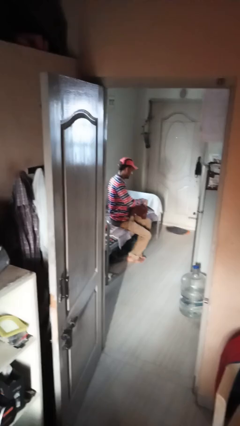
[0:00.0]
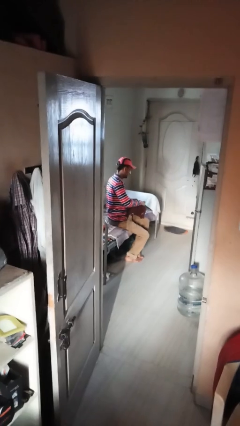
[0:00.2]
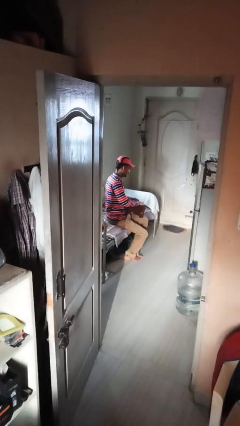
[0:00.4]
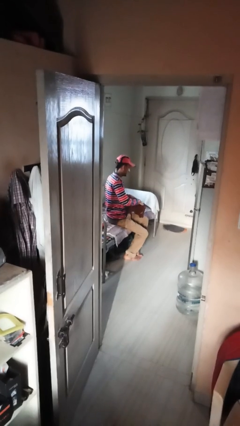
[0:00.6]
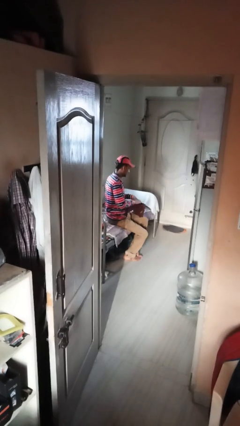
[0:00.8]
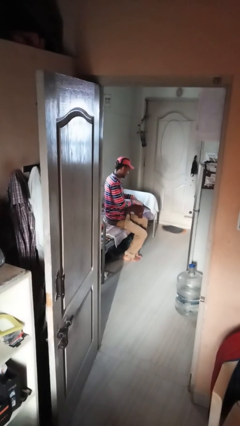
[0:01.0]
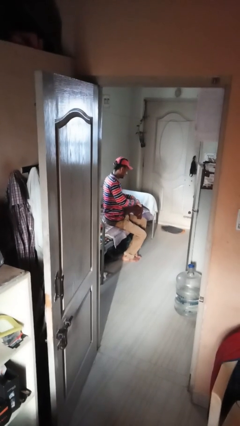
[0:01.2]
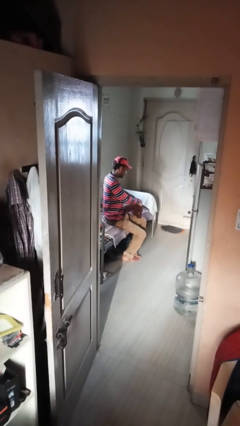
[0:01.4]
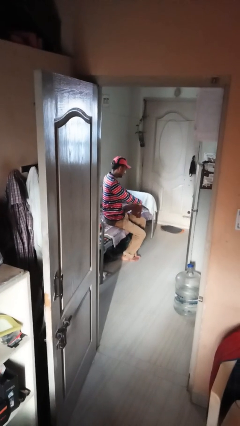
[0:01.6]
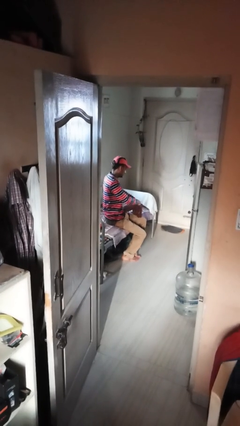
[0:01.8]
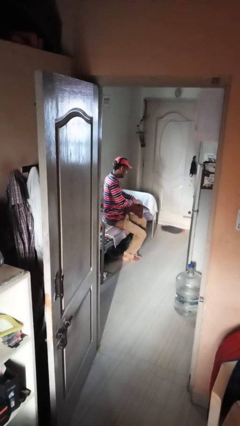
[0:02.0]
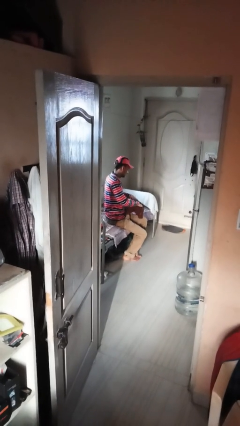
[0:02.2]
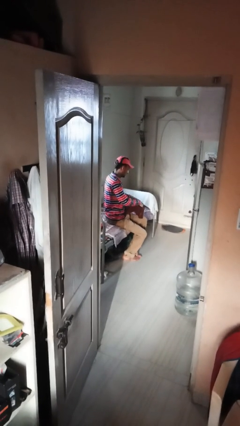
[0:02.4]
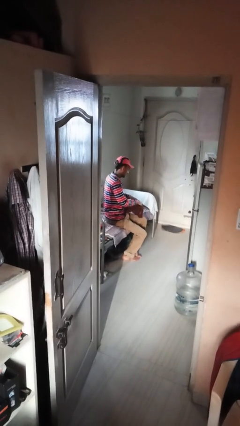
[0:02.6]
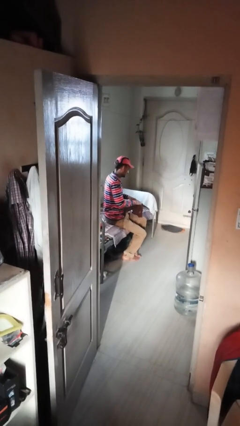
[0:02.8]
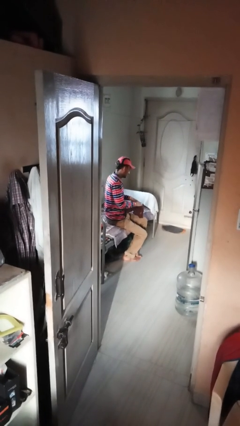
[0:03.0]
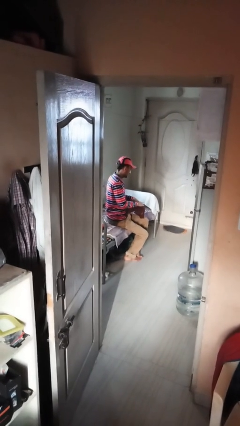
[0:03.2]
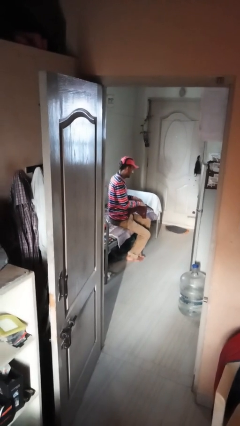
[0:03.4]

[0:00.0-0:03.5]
person searches in purse

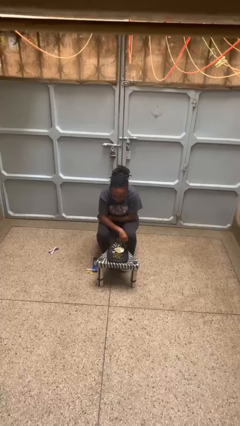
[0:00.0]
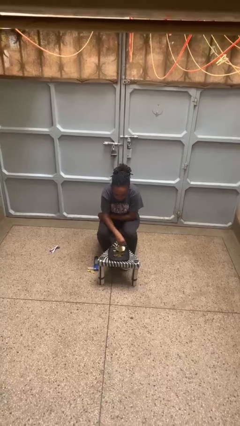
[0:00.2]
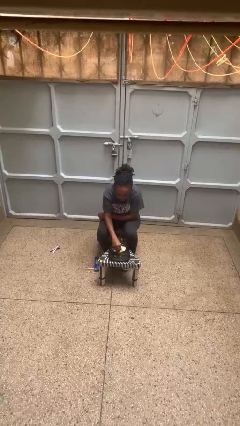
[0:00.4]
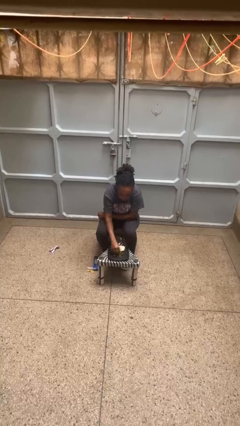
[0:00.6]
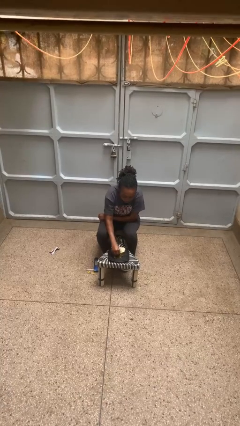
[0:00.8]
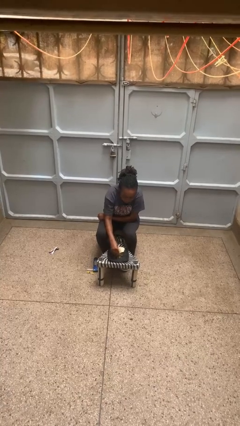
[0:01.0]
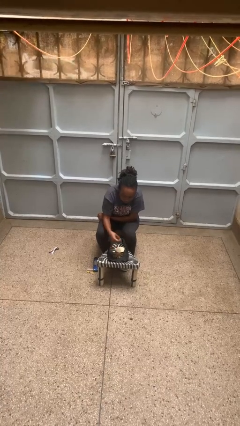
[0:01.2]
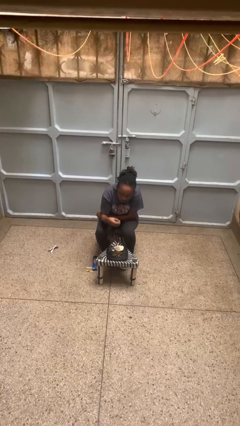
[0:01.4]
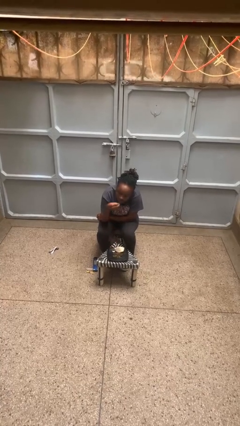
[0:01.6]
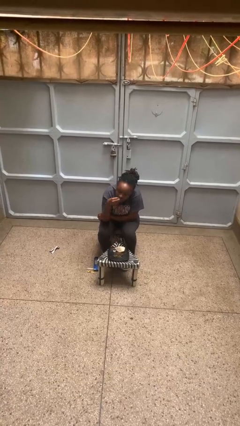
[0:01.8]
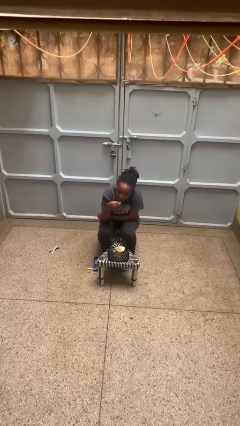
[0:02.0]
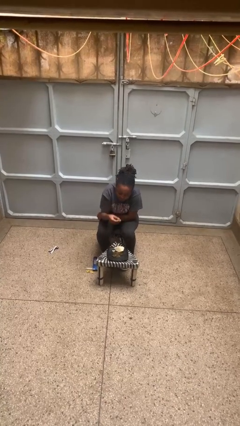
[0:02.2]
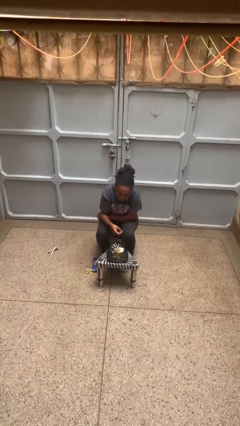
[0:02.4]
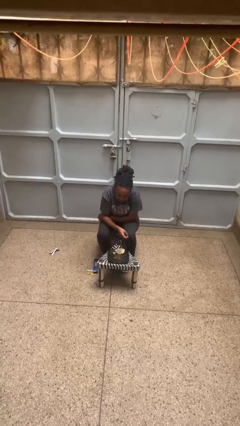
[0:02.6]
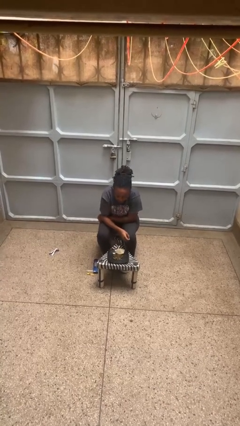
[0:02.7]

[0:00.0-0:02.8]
person eats with hands

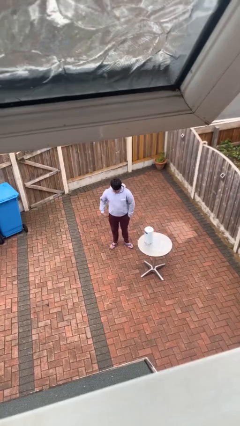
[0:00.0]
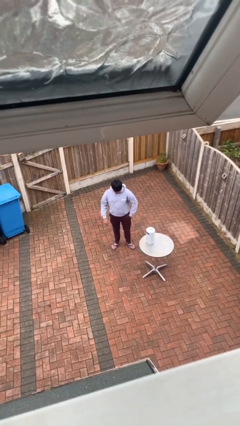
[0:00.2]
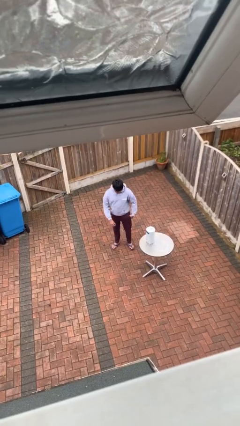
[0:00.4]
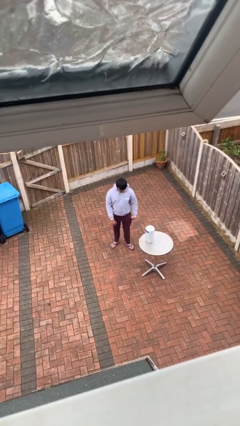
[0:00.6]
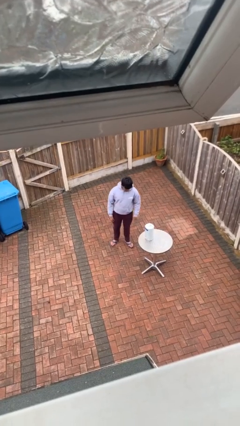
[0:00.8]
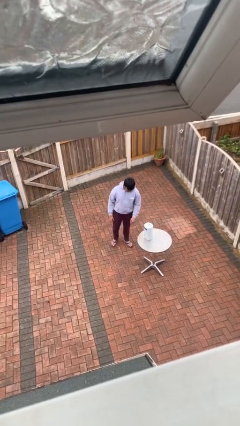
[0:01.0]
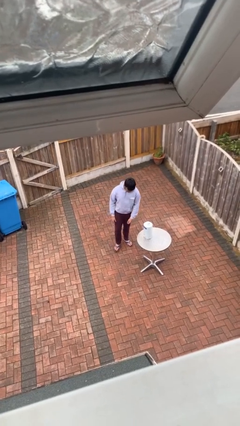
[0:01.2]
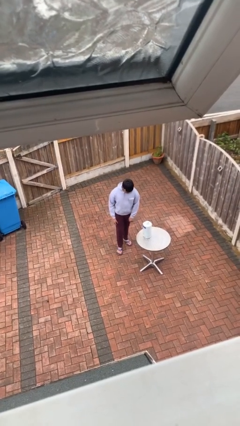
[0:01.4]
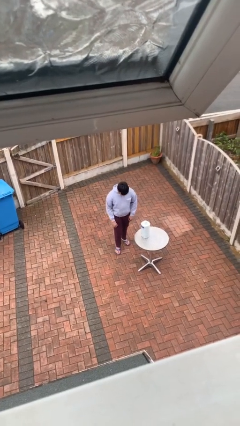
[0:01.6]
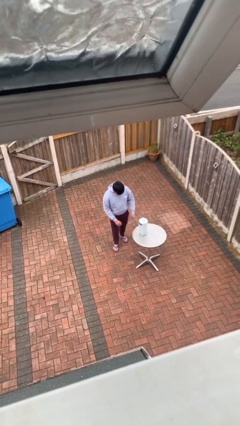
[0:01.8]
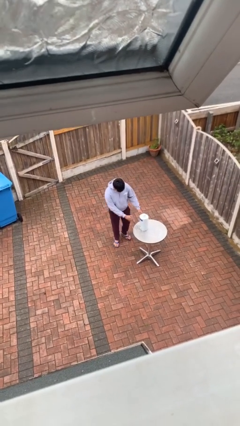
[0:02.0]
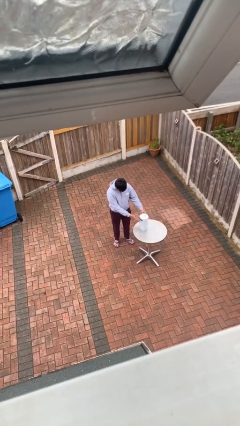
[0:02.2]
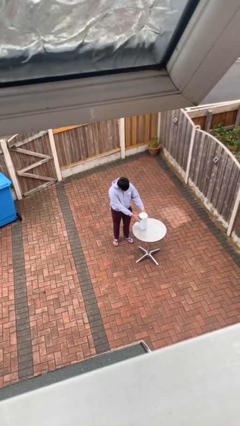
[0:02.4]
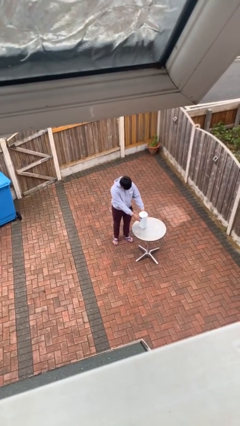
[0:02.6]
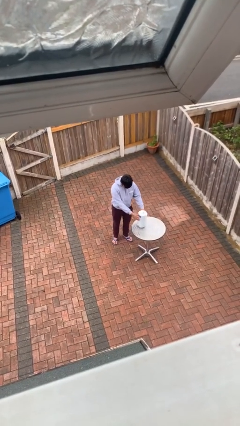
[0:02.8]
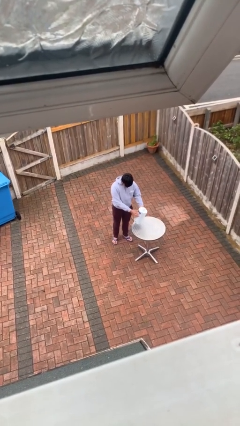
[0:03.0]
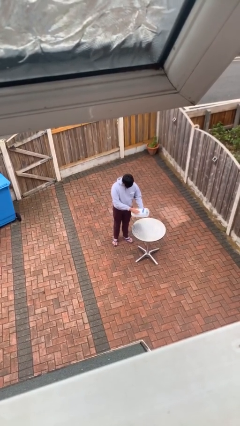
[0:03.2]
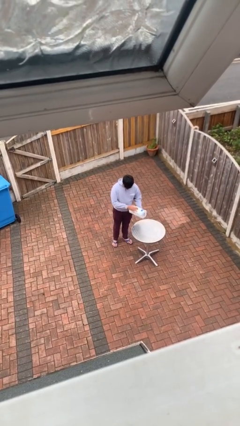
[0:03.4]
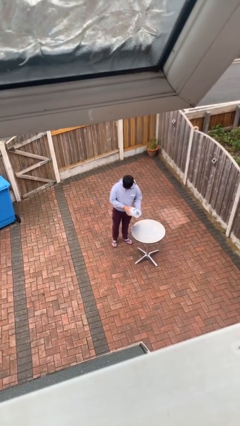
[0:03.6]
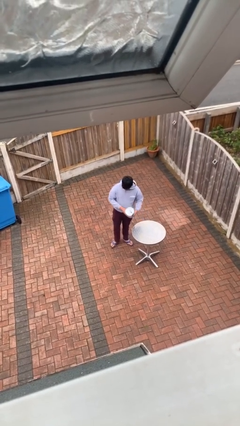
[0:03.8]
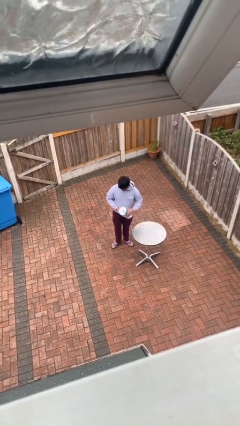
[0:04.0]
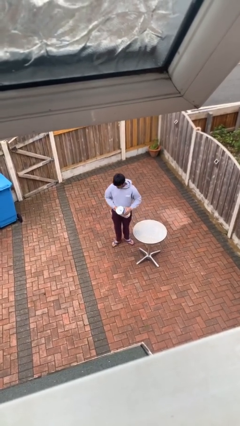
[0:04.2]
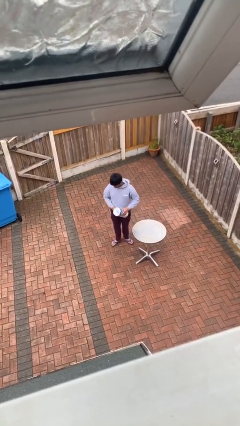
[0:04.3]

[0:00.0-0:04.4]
person picks up object from table

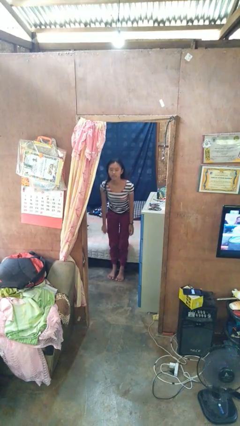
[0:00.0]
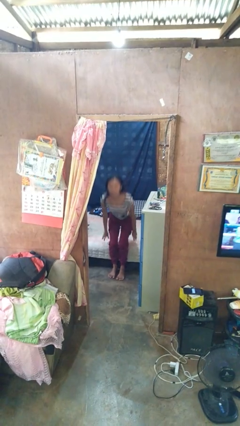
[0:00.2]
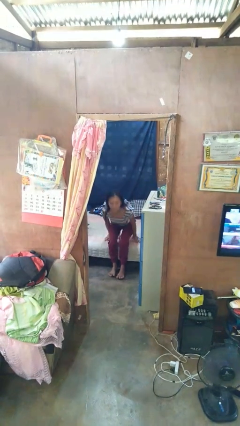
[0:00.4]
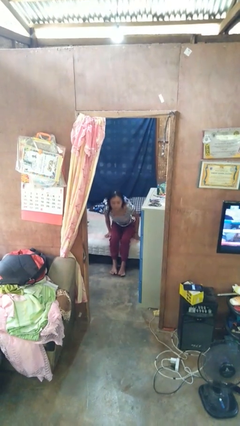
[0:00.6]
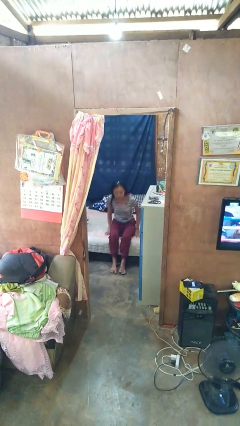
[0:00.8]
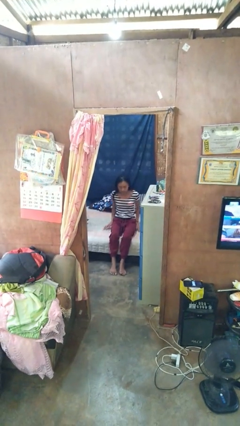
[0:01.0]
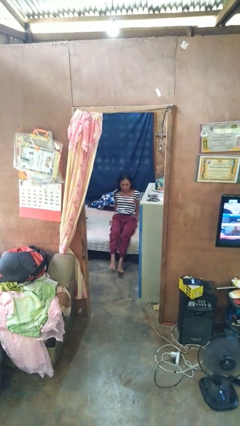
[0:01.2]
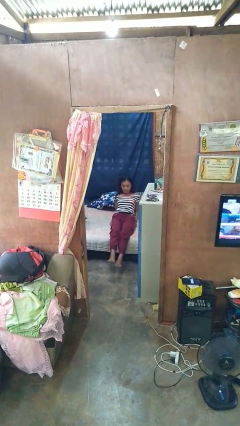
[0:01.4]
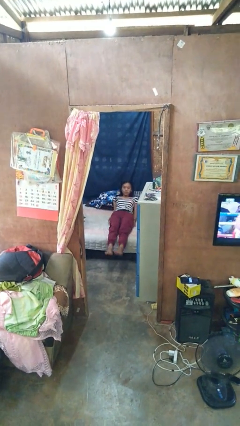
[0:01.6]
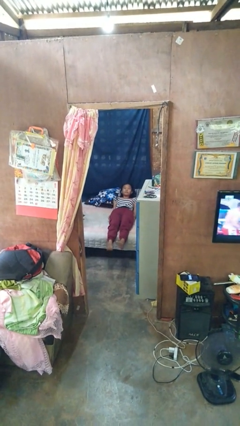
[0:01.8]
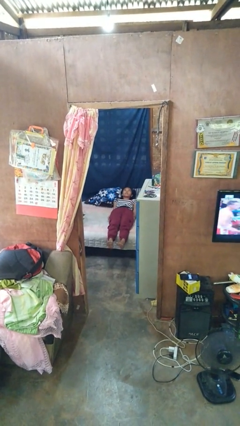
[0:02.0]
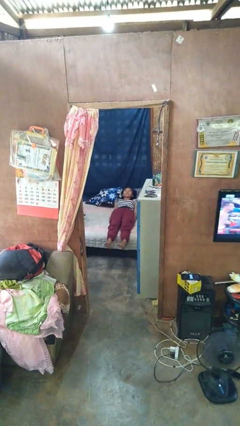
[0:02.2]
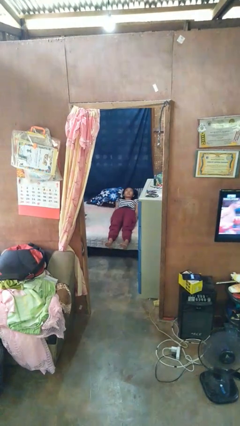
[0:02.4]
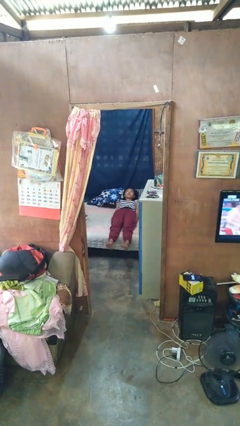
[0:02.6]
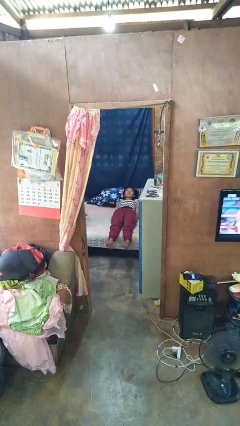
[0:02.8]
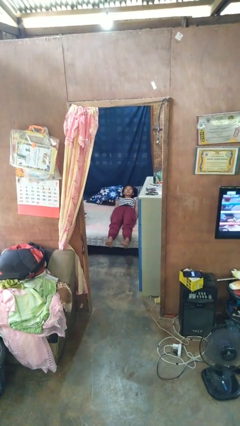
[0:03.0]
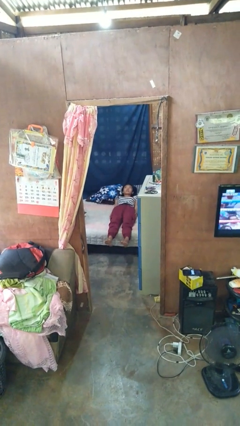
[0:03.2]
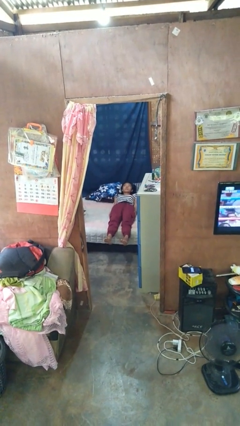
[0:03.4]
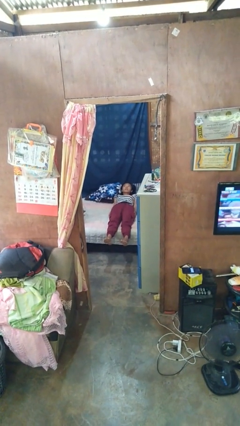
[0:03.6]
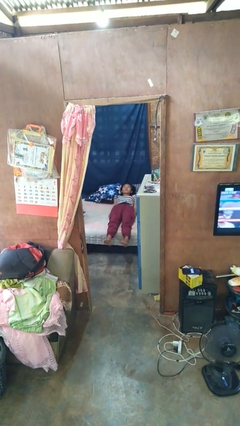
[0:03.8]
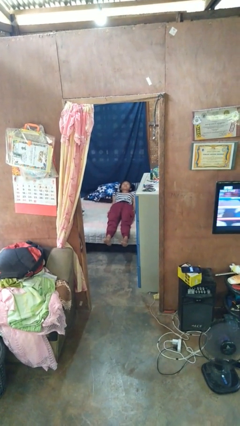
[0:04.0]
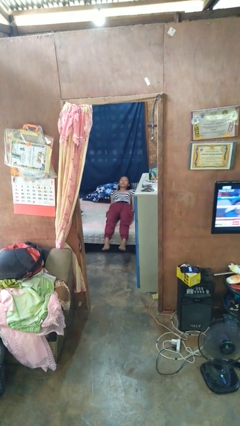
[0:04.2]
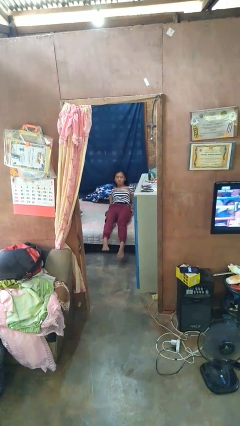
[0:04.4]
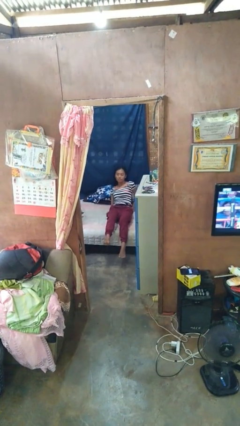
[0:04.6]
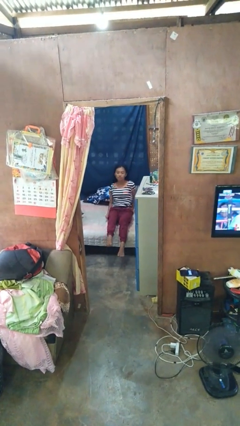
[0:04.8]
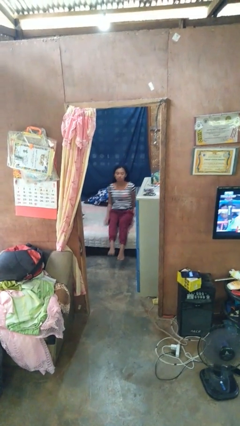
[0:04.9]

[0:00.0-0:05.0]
person lies down on bed

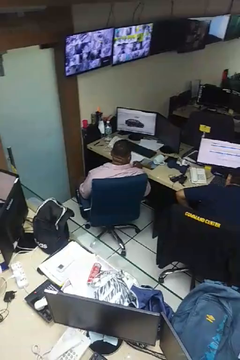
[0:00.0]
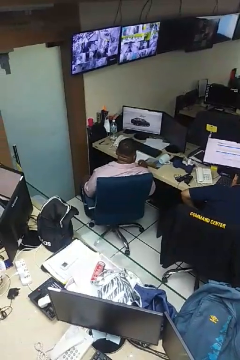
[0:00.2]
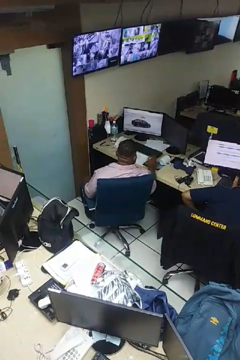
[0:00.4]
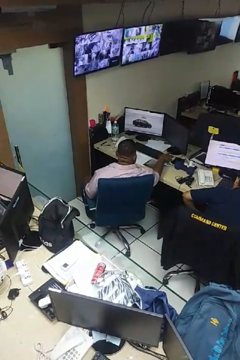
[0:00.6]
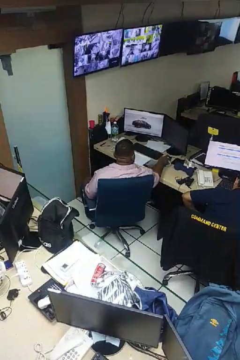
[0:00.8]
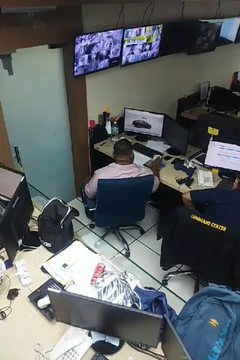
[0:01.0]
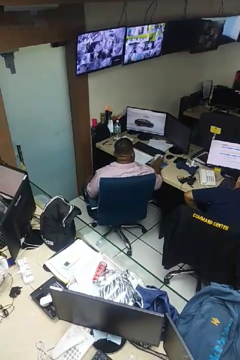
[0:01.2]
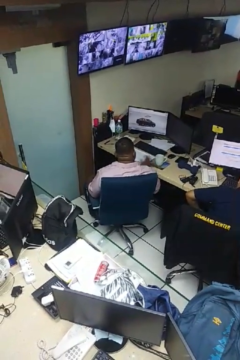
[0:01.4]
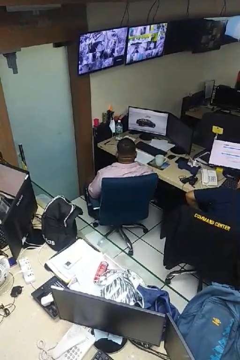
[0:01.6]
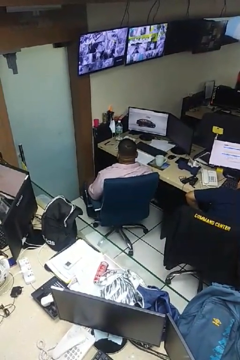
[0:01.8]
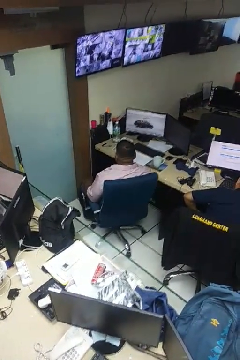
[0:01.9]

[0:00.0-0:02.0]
person sets upright glass

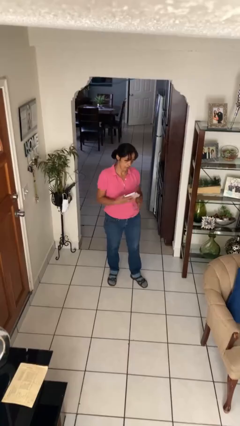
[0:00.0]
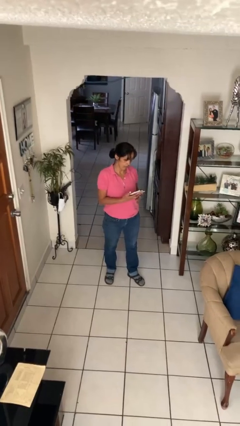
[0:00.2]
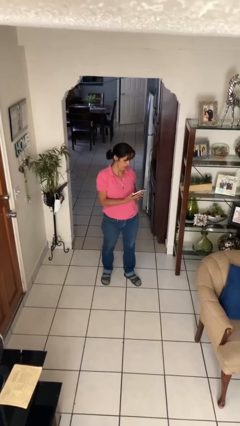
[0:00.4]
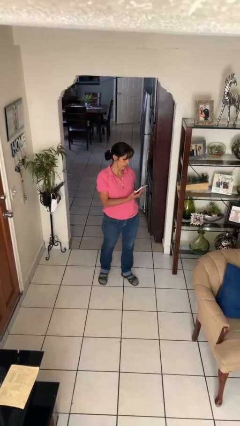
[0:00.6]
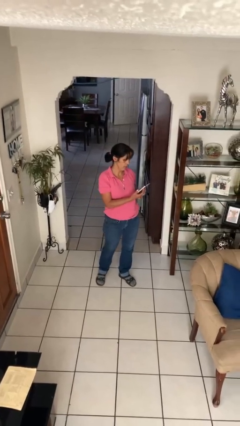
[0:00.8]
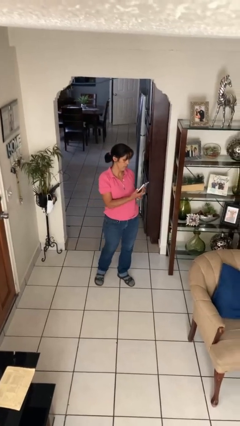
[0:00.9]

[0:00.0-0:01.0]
person takes phone from pocket
